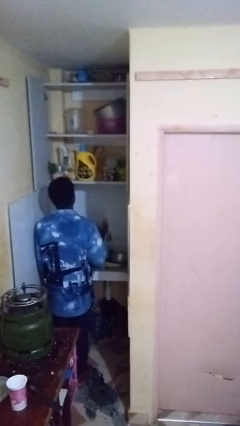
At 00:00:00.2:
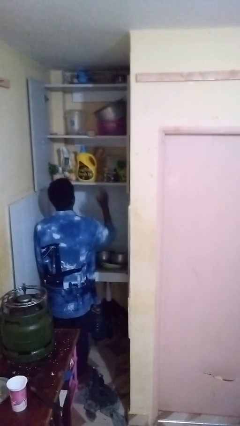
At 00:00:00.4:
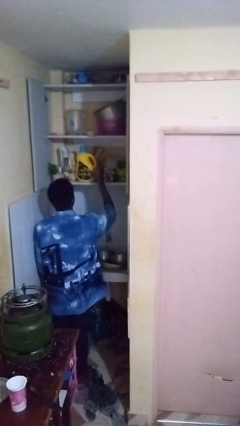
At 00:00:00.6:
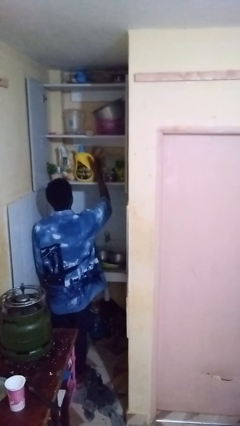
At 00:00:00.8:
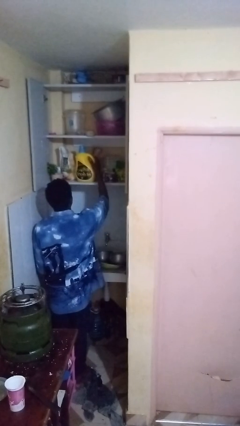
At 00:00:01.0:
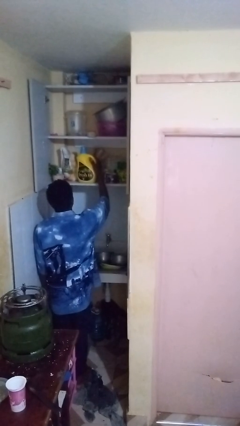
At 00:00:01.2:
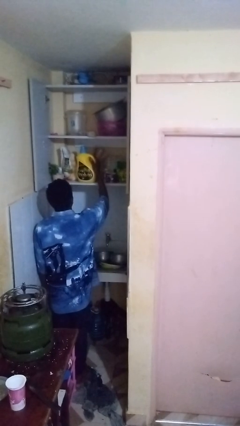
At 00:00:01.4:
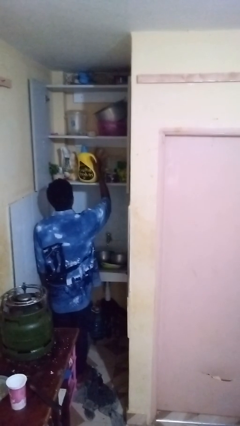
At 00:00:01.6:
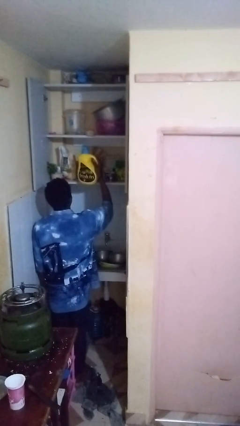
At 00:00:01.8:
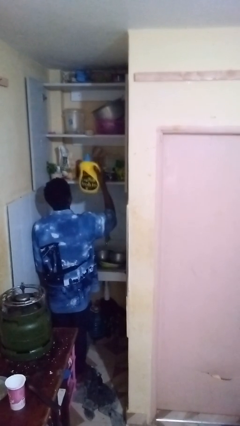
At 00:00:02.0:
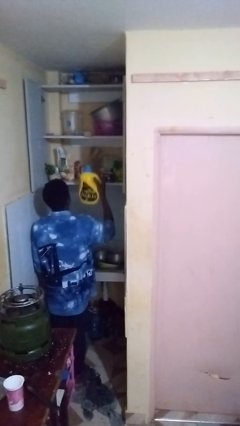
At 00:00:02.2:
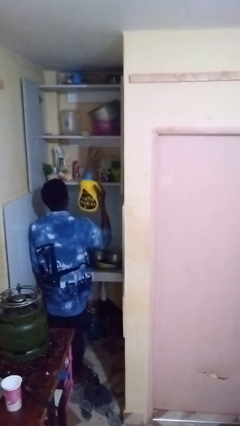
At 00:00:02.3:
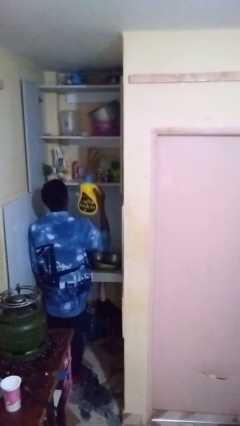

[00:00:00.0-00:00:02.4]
person picks up object from countertop

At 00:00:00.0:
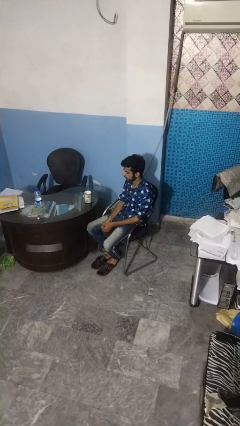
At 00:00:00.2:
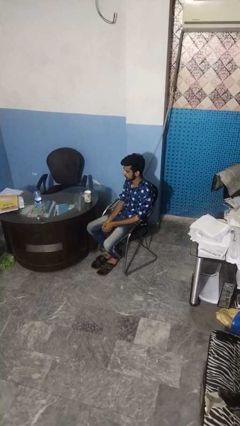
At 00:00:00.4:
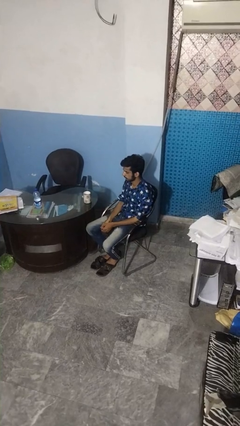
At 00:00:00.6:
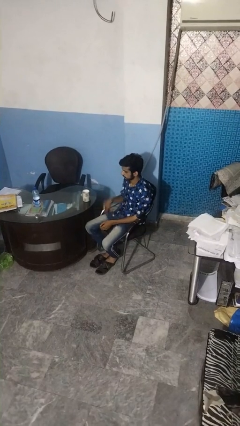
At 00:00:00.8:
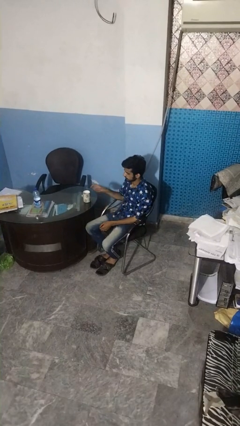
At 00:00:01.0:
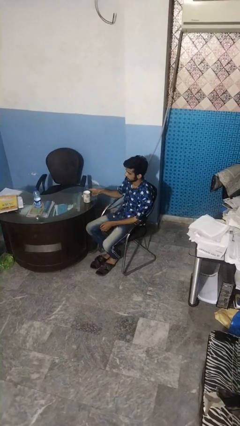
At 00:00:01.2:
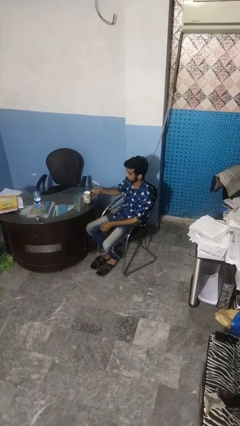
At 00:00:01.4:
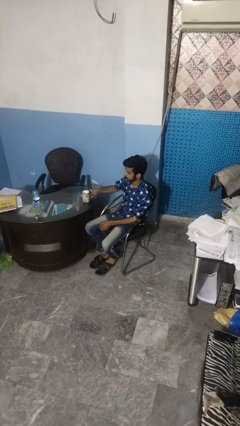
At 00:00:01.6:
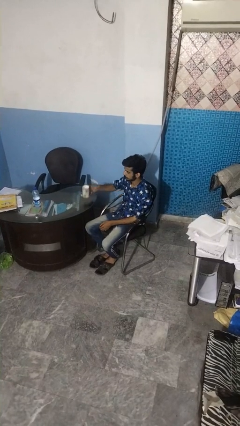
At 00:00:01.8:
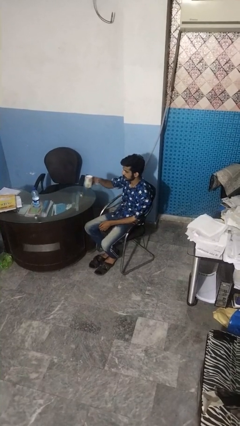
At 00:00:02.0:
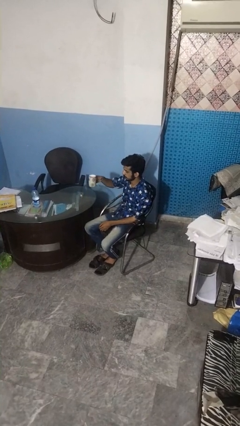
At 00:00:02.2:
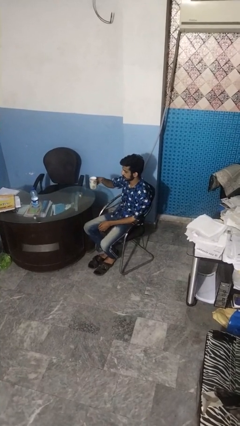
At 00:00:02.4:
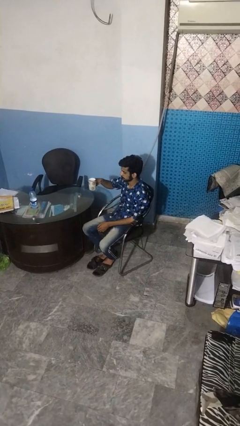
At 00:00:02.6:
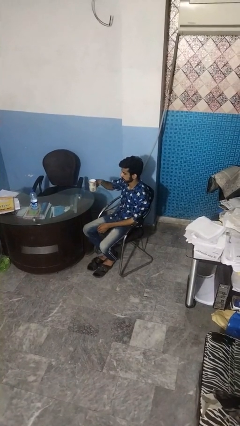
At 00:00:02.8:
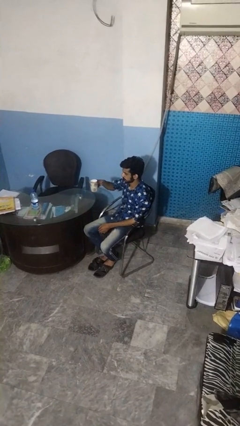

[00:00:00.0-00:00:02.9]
person picks up object from table

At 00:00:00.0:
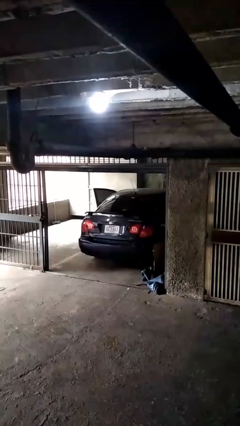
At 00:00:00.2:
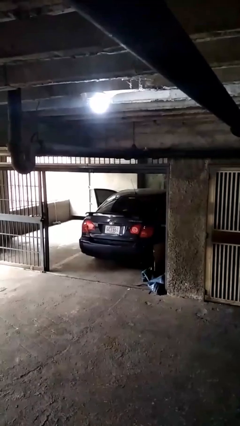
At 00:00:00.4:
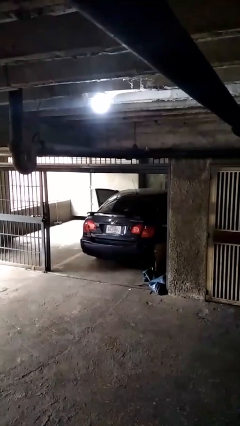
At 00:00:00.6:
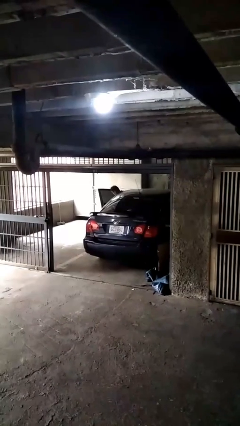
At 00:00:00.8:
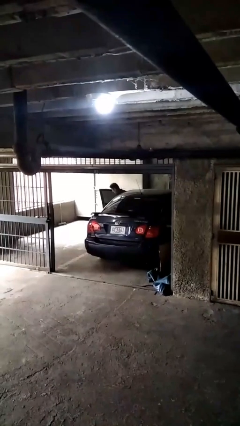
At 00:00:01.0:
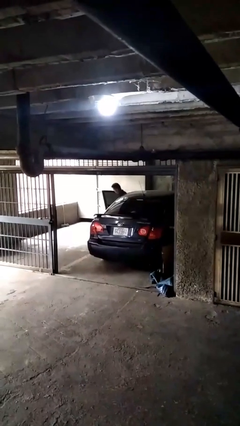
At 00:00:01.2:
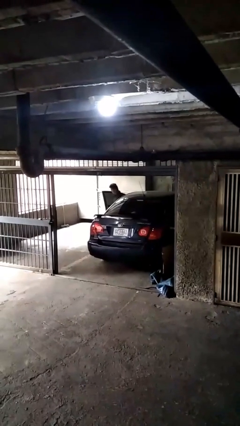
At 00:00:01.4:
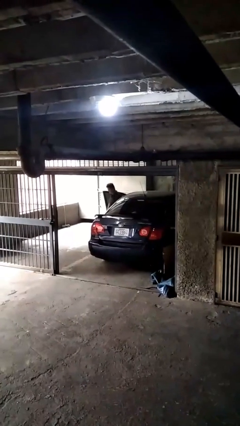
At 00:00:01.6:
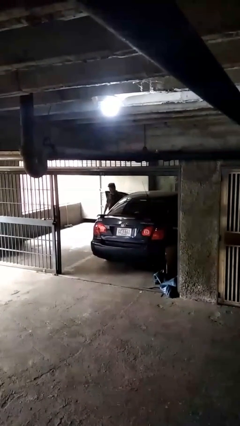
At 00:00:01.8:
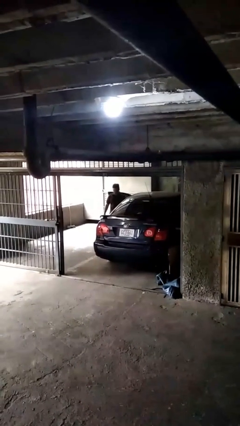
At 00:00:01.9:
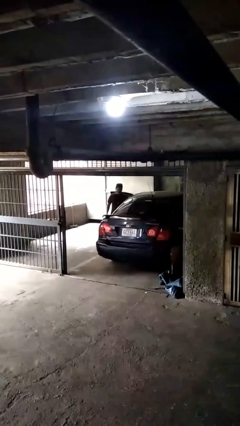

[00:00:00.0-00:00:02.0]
person exits car

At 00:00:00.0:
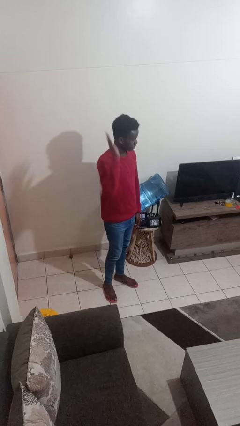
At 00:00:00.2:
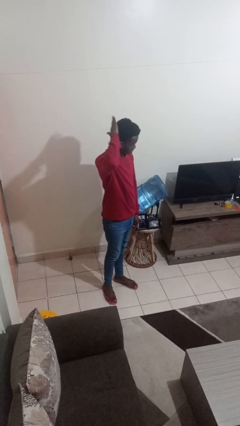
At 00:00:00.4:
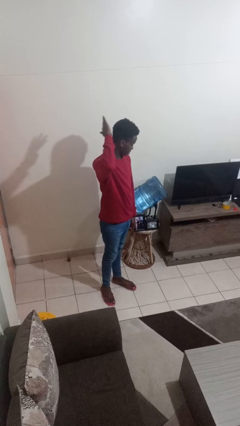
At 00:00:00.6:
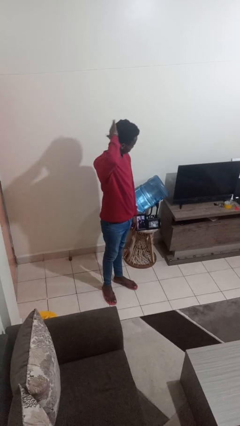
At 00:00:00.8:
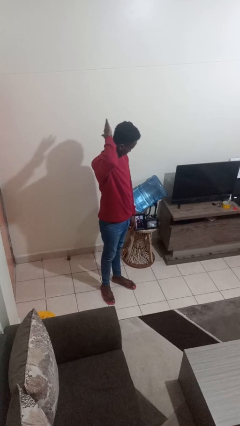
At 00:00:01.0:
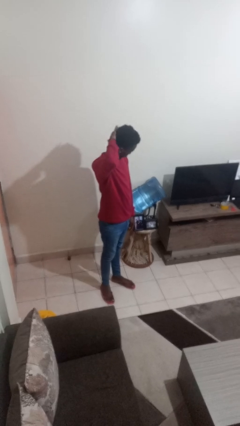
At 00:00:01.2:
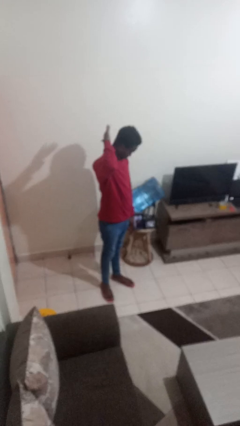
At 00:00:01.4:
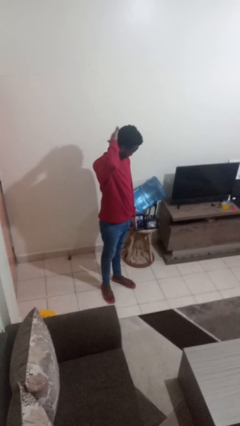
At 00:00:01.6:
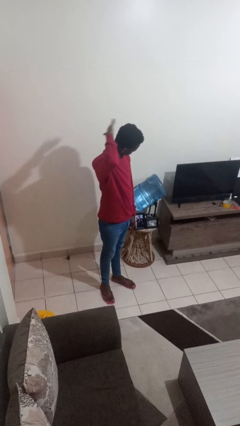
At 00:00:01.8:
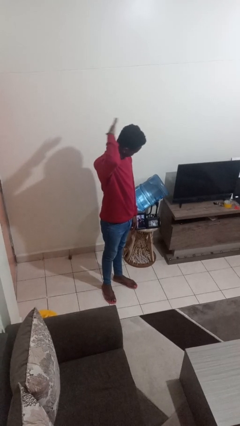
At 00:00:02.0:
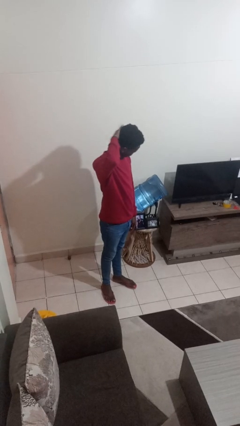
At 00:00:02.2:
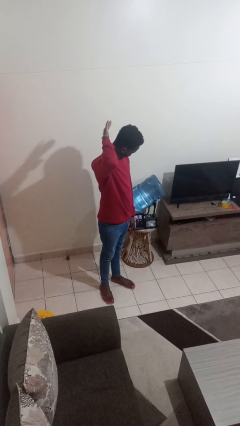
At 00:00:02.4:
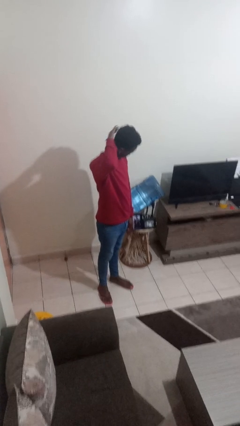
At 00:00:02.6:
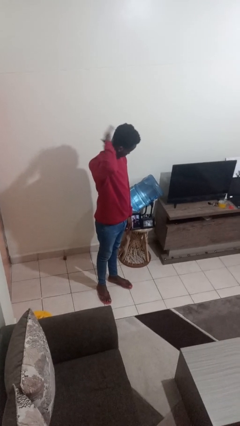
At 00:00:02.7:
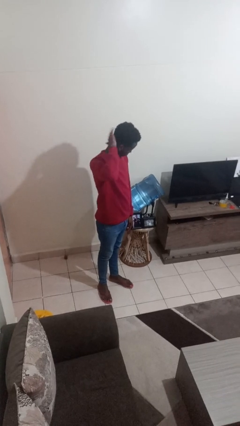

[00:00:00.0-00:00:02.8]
person pats head

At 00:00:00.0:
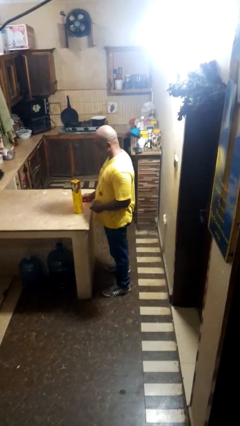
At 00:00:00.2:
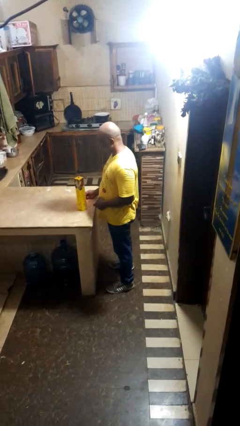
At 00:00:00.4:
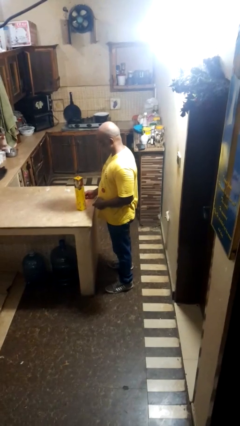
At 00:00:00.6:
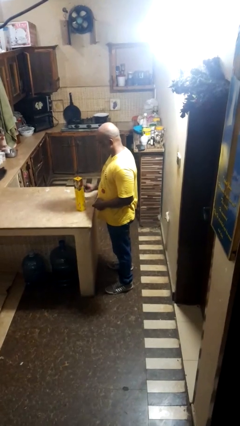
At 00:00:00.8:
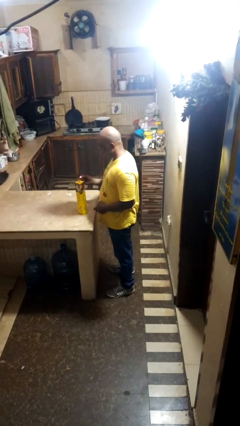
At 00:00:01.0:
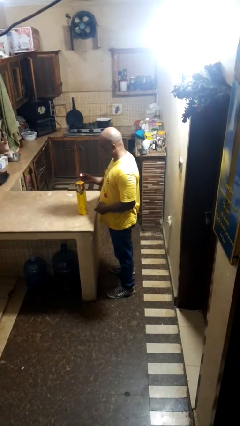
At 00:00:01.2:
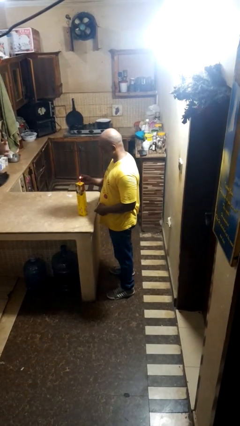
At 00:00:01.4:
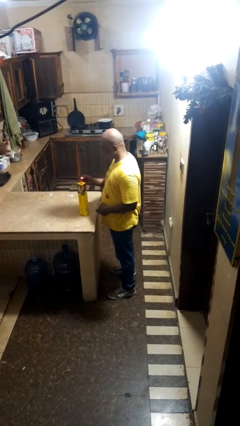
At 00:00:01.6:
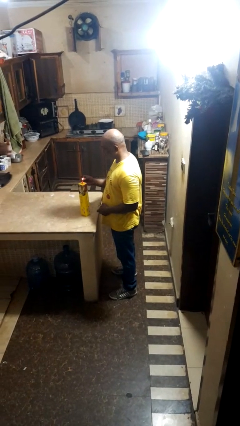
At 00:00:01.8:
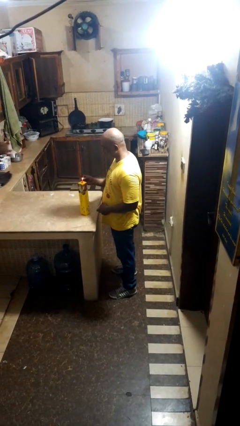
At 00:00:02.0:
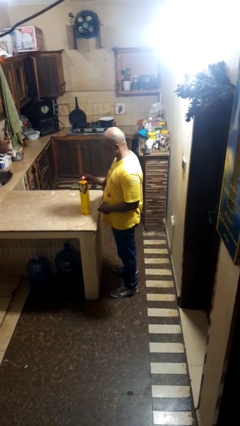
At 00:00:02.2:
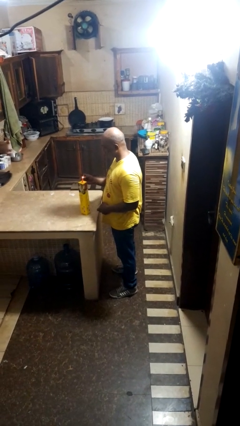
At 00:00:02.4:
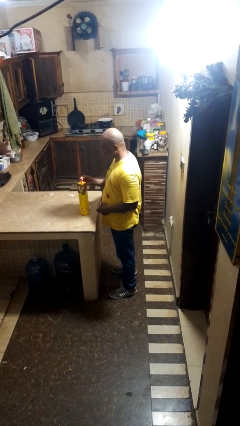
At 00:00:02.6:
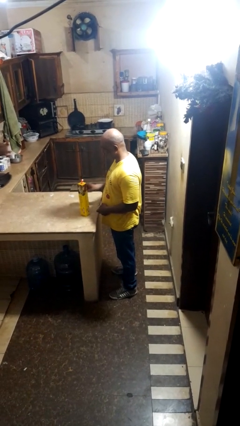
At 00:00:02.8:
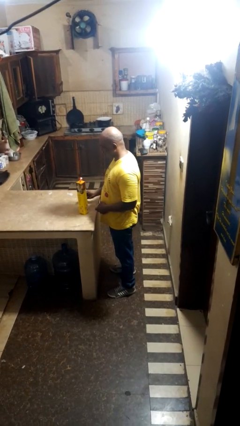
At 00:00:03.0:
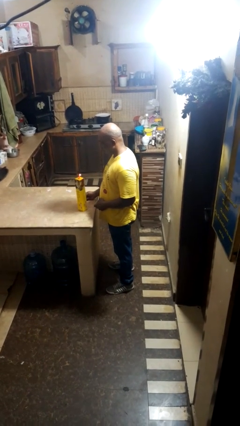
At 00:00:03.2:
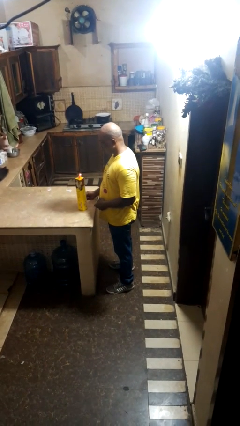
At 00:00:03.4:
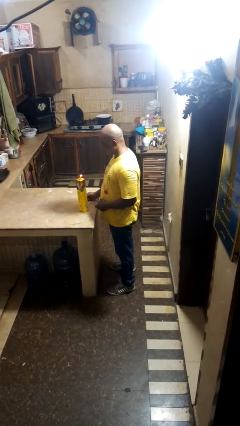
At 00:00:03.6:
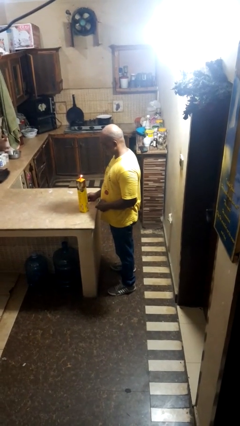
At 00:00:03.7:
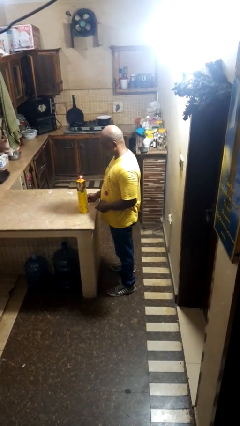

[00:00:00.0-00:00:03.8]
person lights candle

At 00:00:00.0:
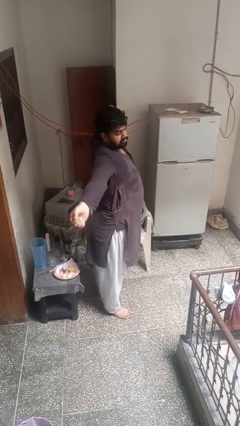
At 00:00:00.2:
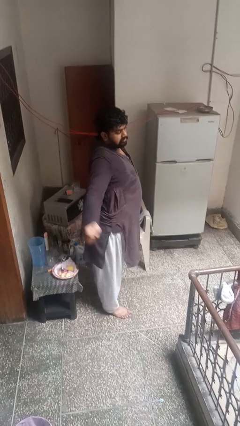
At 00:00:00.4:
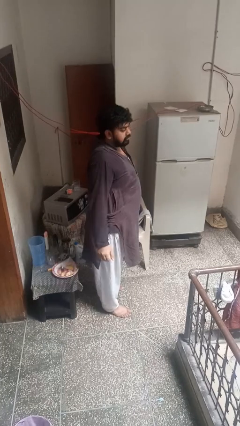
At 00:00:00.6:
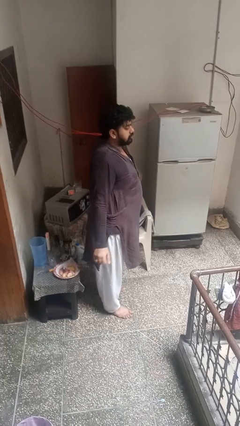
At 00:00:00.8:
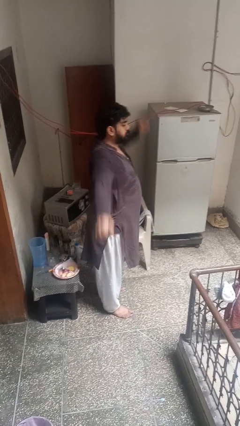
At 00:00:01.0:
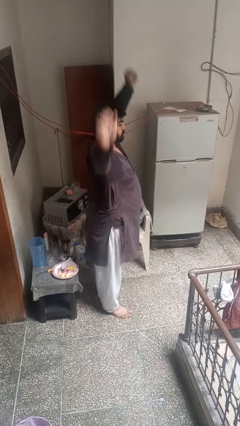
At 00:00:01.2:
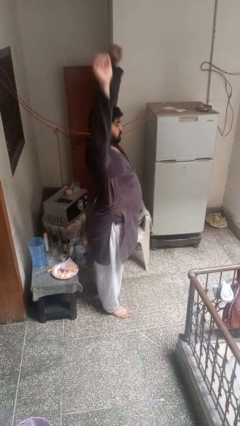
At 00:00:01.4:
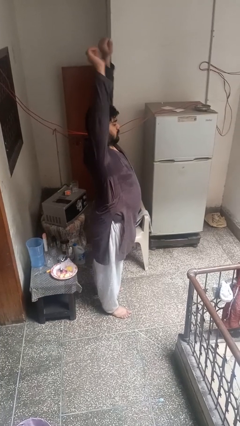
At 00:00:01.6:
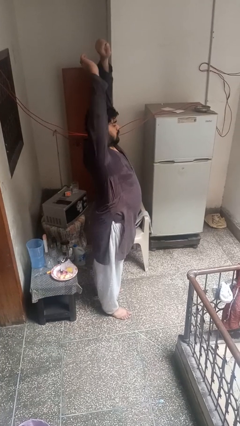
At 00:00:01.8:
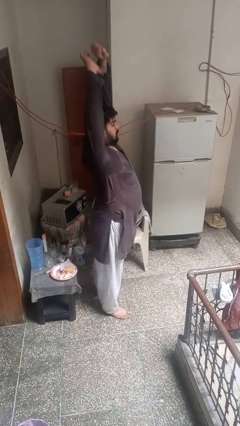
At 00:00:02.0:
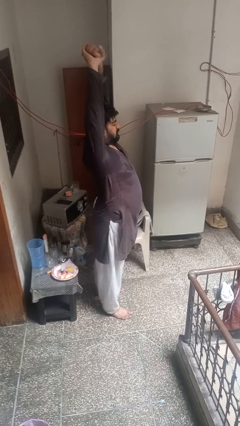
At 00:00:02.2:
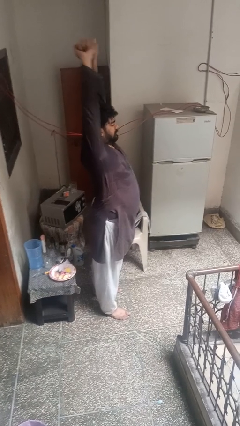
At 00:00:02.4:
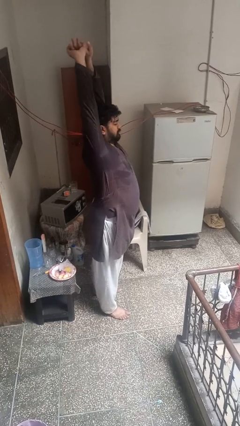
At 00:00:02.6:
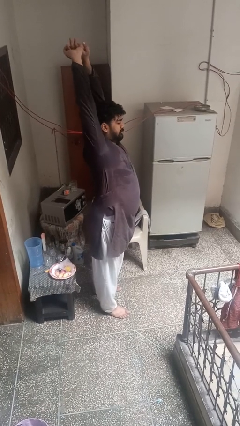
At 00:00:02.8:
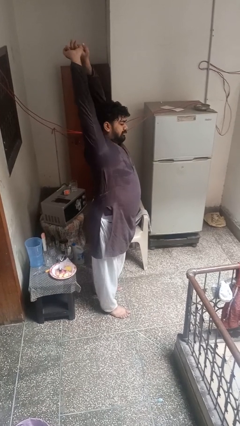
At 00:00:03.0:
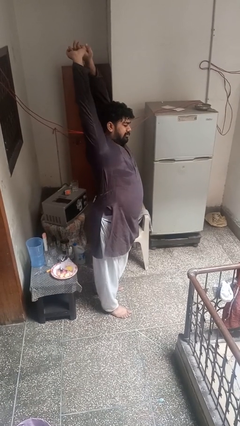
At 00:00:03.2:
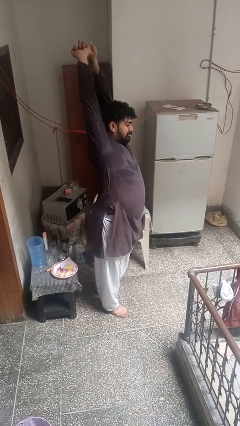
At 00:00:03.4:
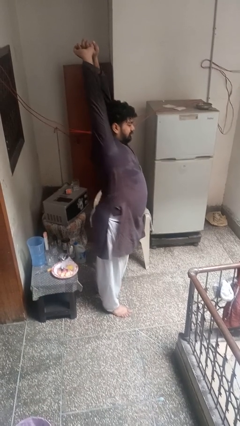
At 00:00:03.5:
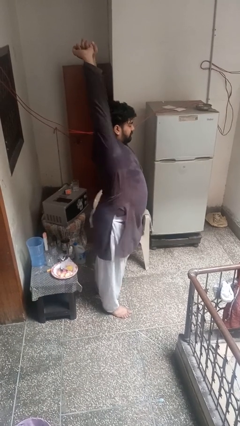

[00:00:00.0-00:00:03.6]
person stretches arms over head
